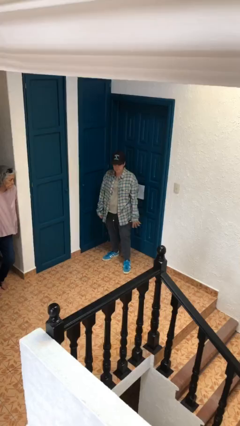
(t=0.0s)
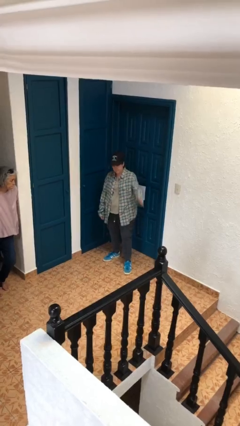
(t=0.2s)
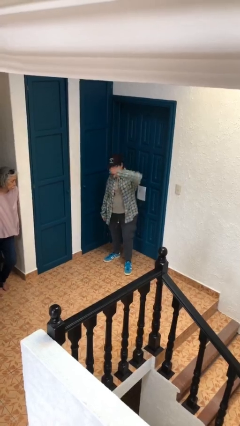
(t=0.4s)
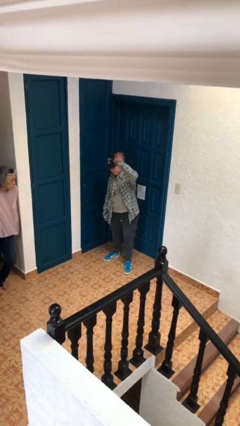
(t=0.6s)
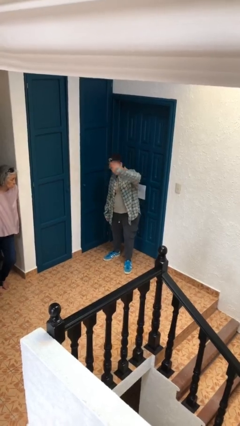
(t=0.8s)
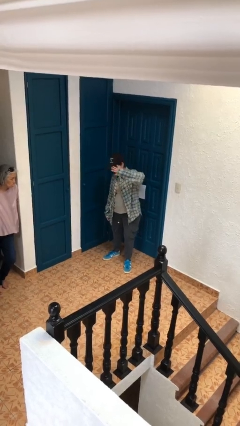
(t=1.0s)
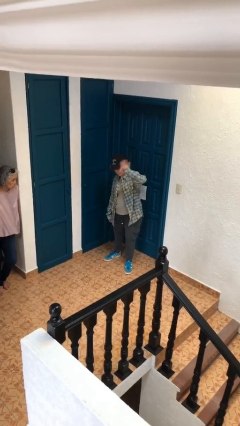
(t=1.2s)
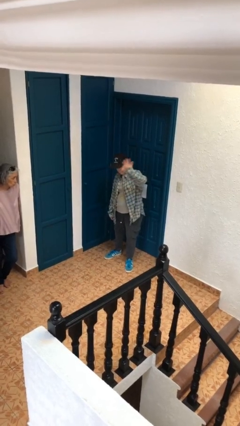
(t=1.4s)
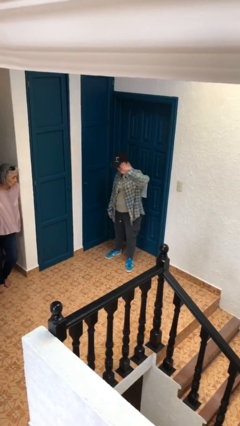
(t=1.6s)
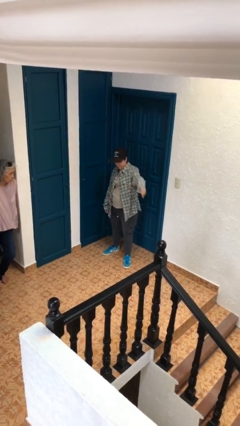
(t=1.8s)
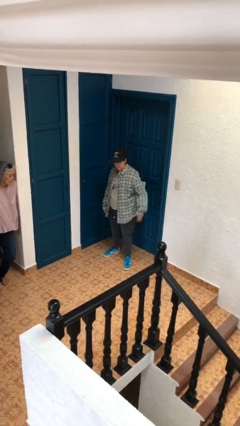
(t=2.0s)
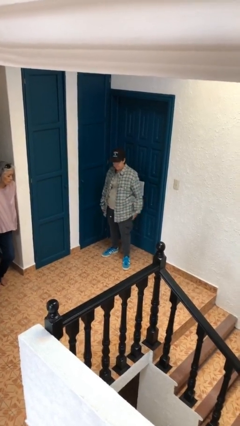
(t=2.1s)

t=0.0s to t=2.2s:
person waves at person

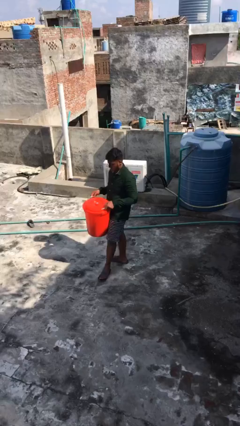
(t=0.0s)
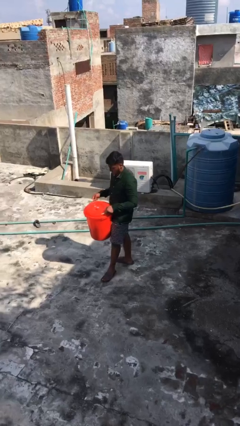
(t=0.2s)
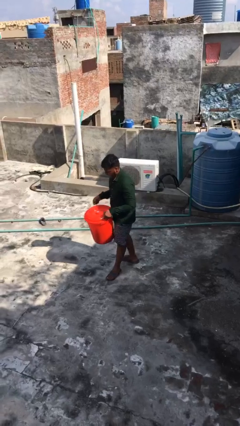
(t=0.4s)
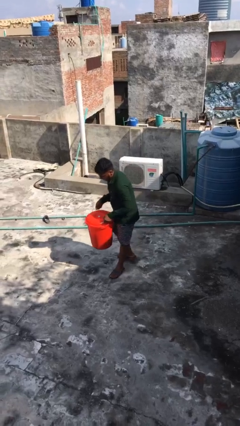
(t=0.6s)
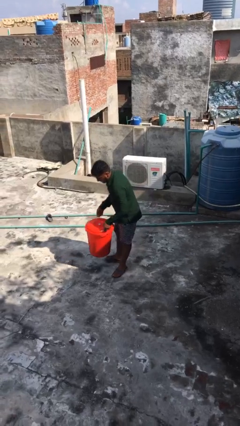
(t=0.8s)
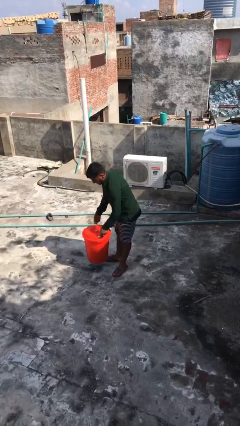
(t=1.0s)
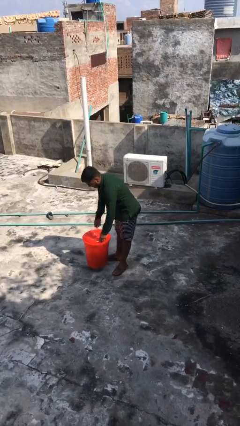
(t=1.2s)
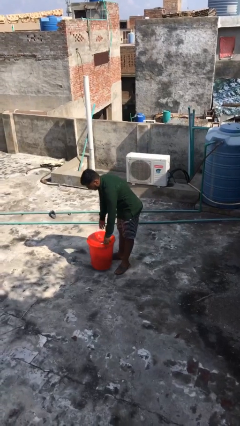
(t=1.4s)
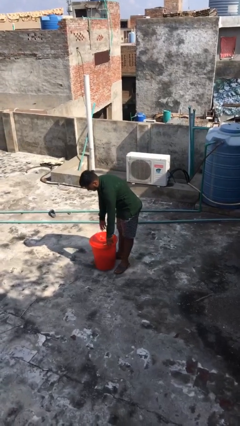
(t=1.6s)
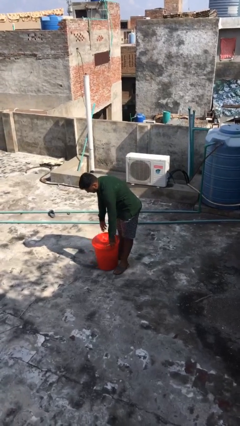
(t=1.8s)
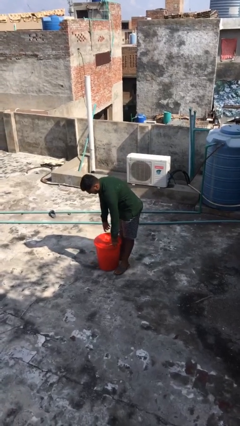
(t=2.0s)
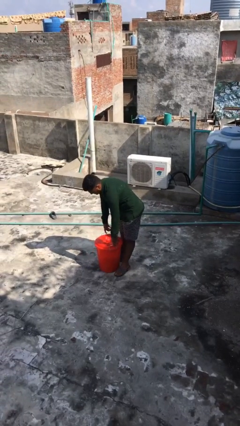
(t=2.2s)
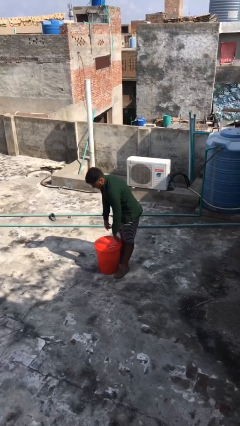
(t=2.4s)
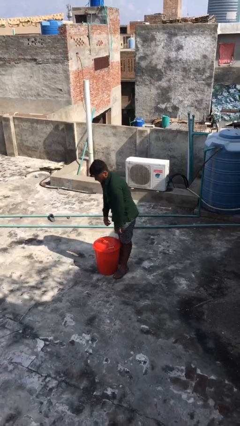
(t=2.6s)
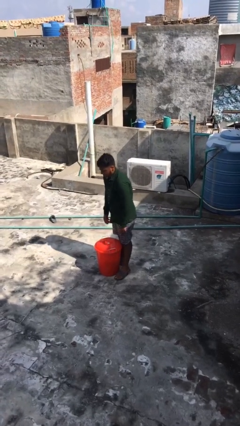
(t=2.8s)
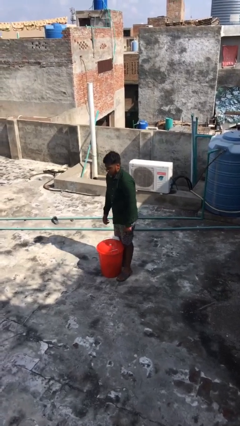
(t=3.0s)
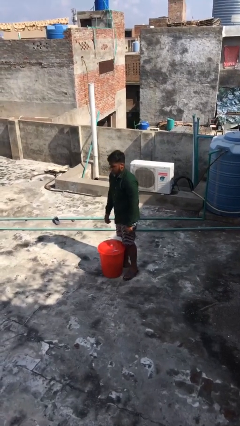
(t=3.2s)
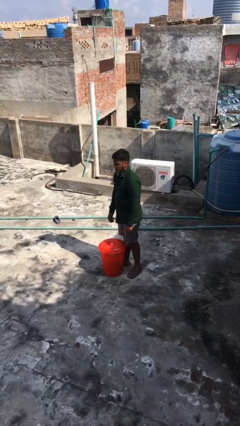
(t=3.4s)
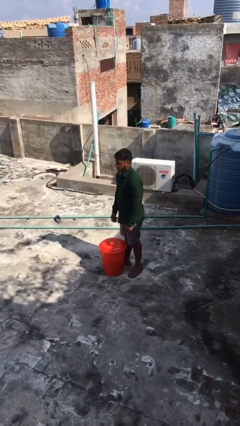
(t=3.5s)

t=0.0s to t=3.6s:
person puts down object on floor

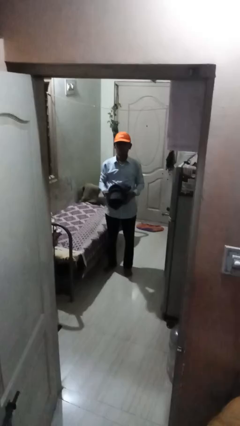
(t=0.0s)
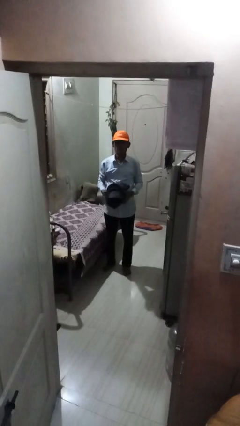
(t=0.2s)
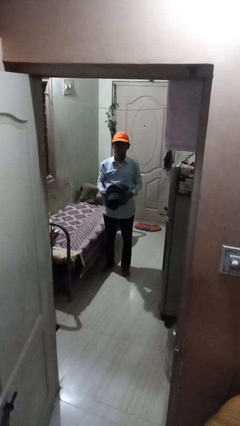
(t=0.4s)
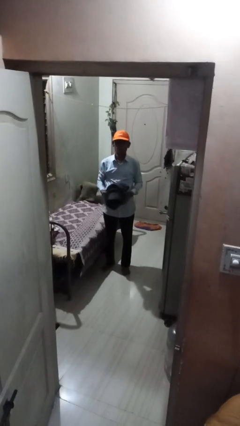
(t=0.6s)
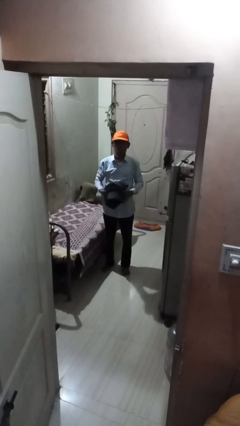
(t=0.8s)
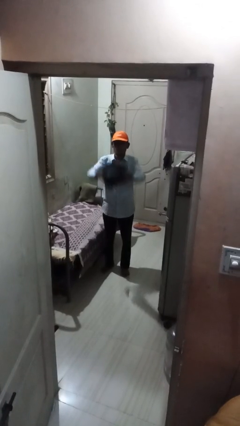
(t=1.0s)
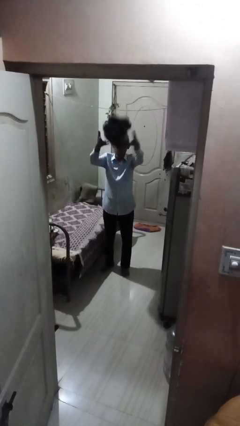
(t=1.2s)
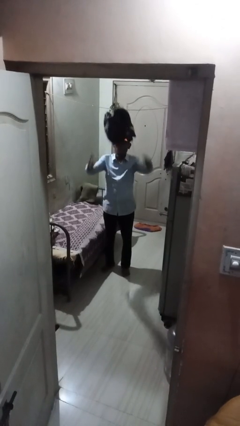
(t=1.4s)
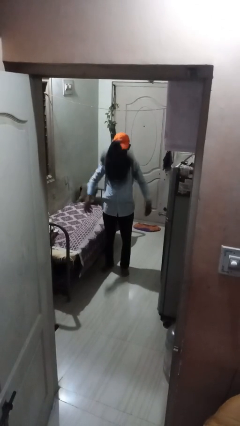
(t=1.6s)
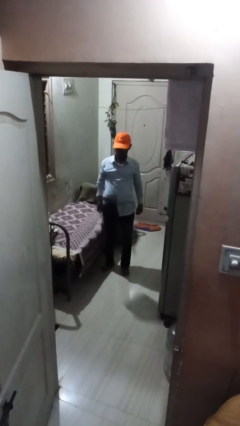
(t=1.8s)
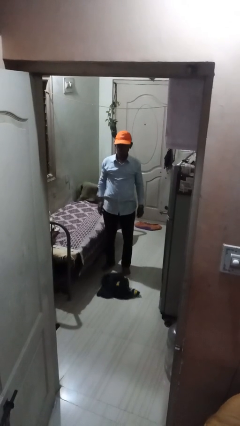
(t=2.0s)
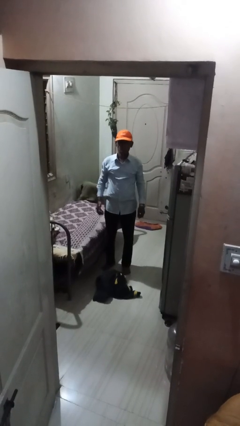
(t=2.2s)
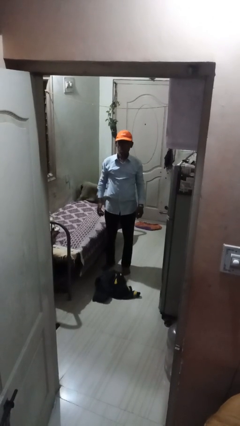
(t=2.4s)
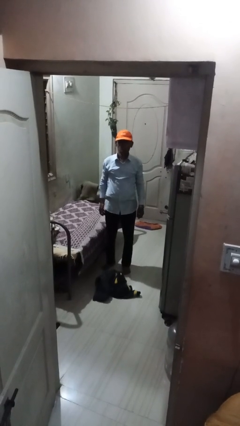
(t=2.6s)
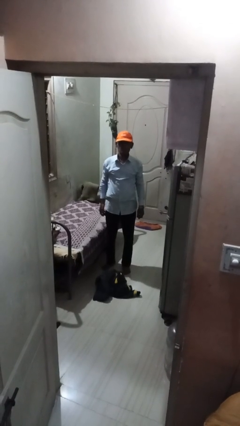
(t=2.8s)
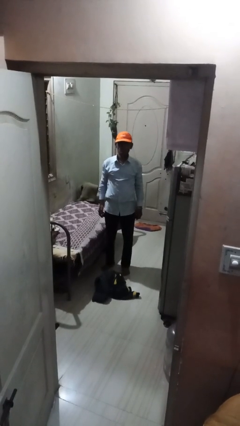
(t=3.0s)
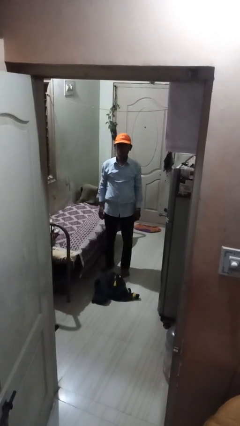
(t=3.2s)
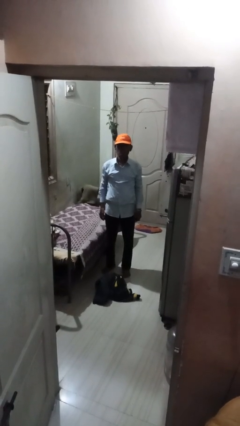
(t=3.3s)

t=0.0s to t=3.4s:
person throws object into air

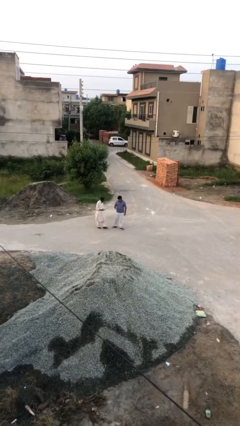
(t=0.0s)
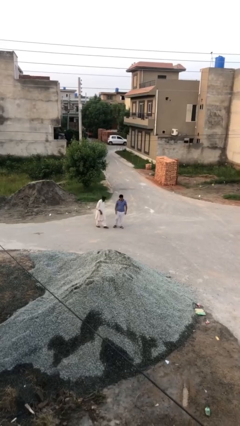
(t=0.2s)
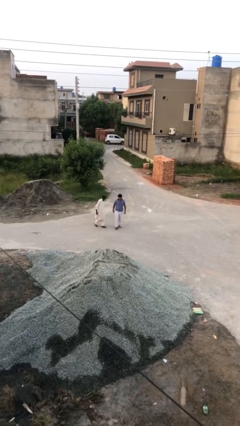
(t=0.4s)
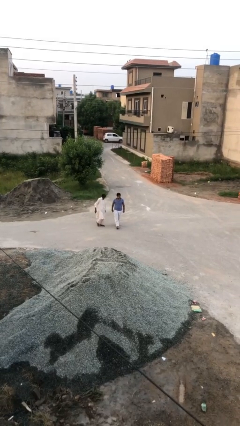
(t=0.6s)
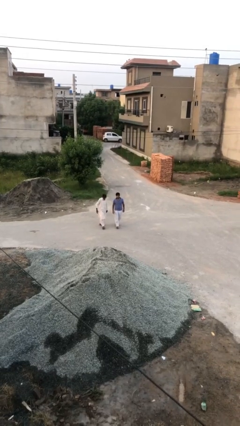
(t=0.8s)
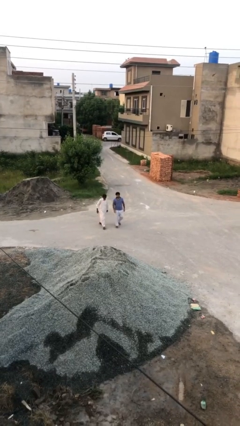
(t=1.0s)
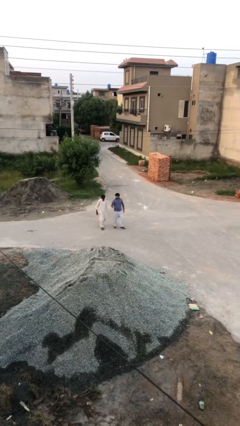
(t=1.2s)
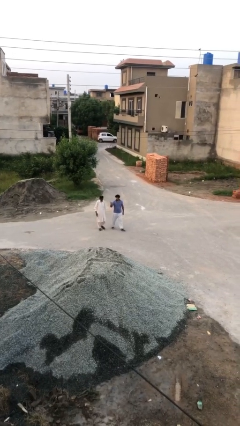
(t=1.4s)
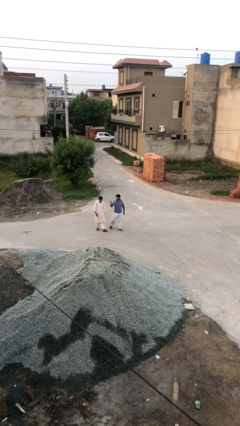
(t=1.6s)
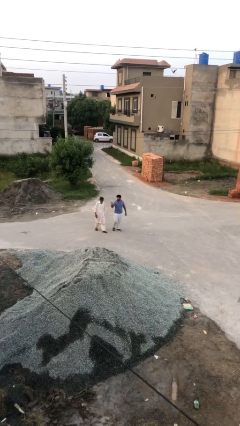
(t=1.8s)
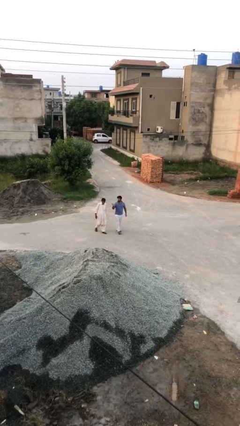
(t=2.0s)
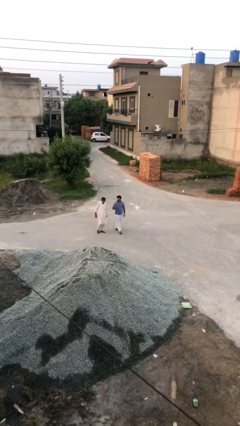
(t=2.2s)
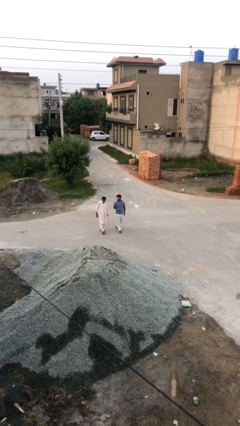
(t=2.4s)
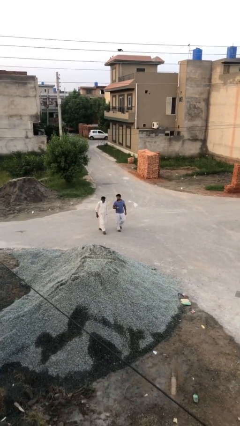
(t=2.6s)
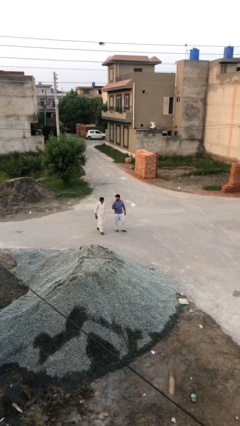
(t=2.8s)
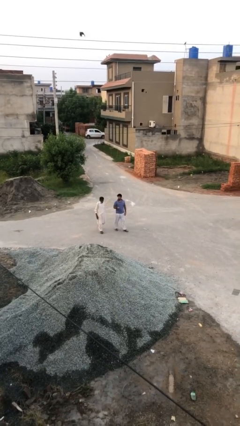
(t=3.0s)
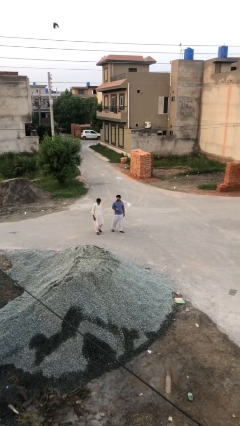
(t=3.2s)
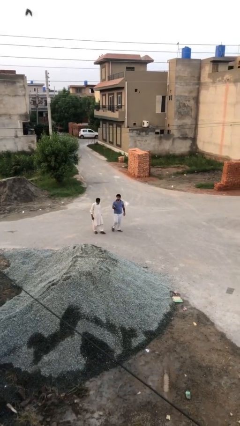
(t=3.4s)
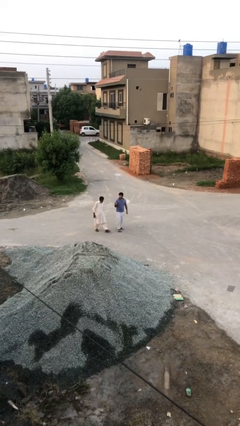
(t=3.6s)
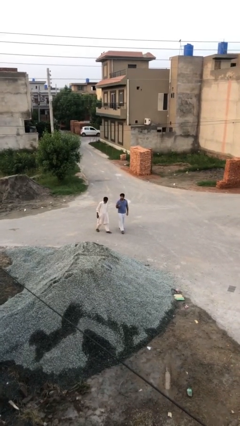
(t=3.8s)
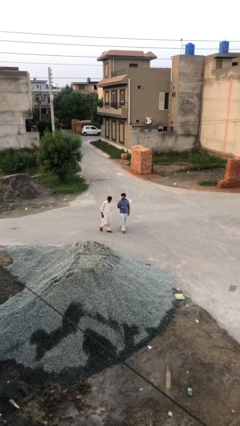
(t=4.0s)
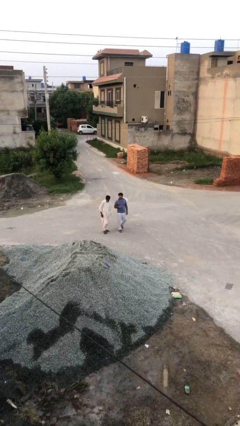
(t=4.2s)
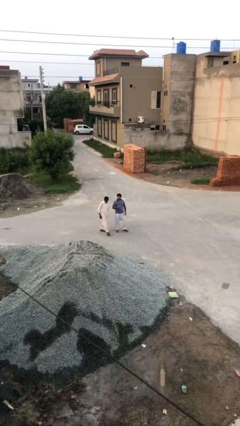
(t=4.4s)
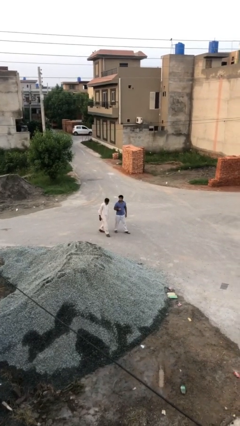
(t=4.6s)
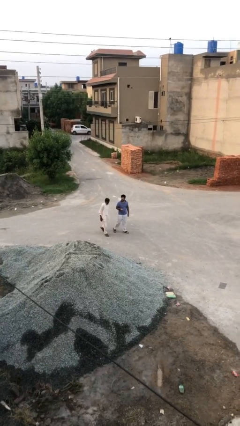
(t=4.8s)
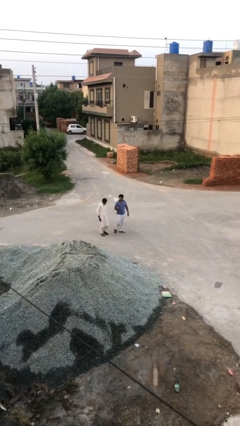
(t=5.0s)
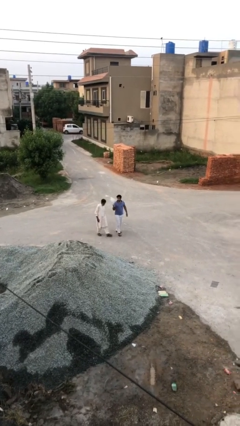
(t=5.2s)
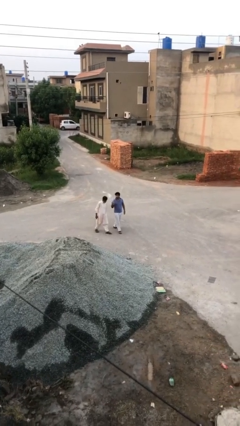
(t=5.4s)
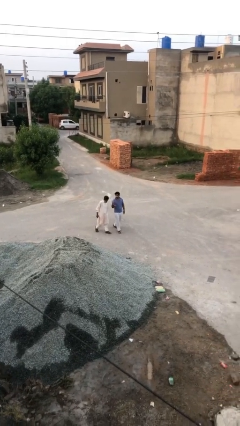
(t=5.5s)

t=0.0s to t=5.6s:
person talks to person

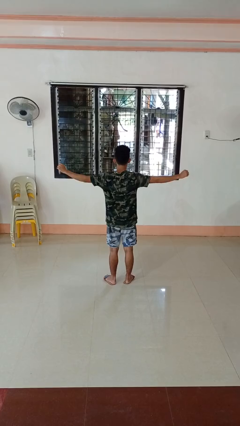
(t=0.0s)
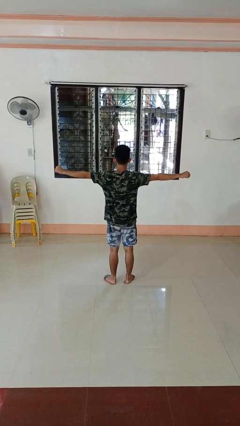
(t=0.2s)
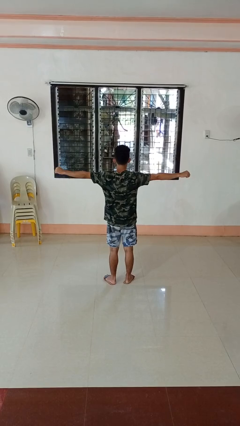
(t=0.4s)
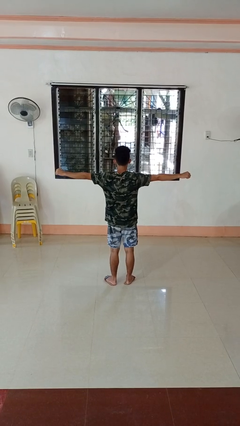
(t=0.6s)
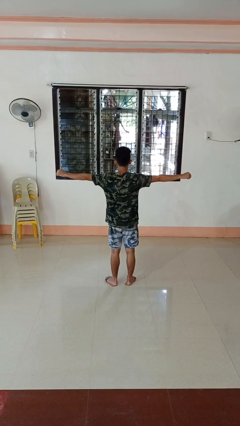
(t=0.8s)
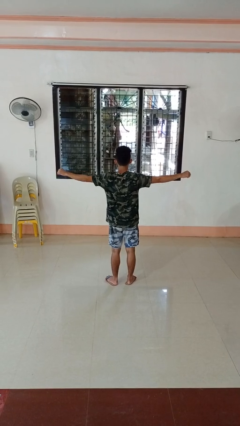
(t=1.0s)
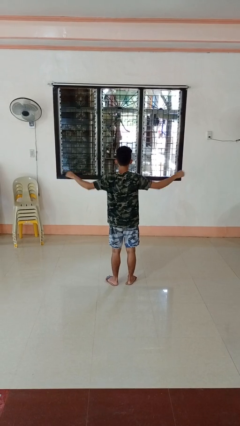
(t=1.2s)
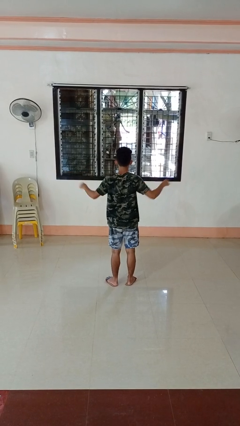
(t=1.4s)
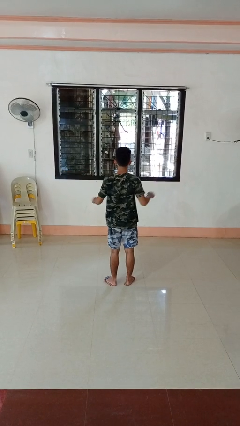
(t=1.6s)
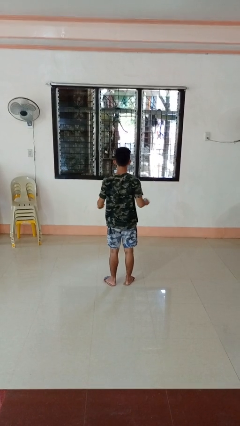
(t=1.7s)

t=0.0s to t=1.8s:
person stretches arms to side

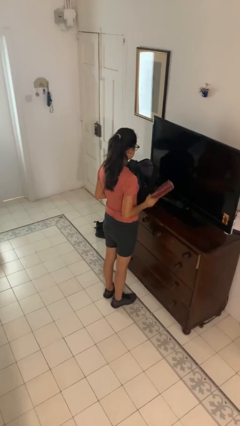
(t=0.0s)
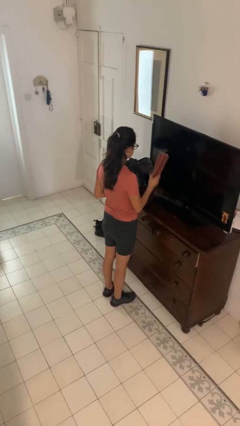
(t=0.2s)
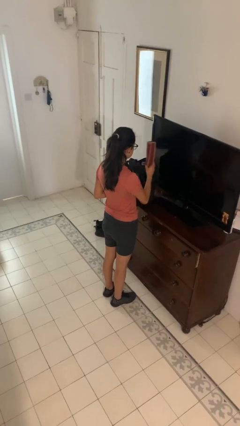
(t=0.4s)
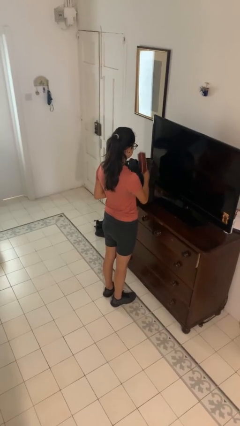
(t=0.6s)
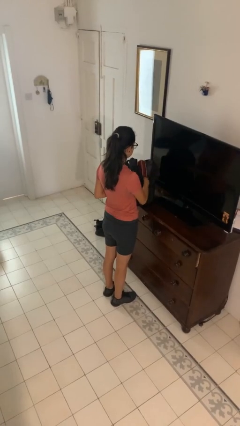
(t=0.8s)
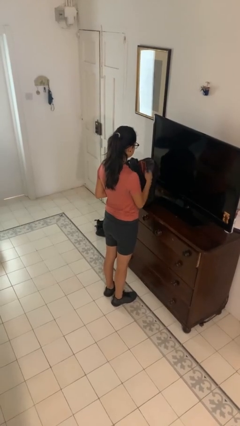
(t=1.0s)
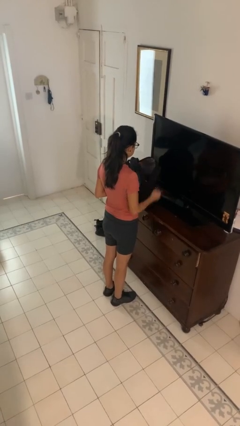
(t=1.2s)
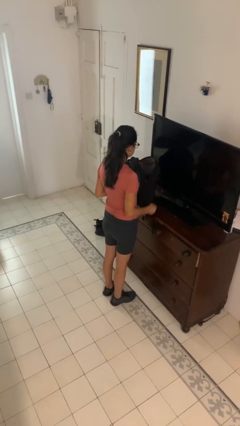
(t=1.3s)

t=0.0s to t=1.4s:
person puts object into bag
